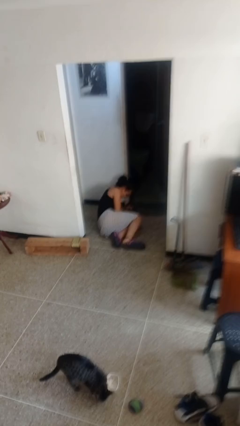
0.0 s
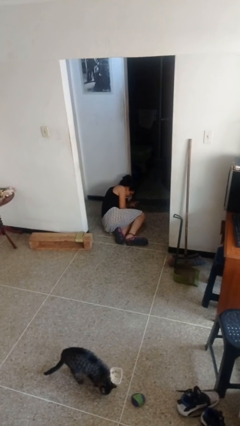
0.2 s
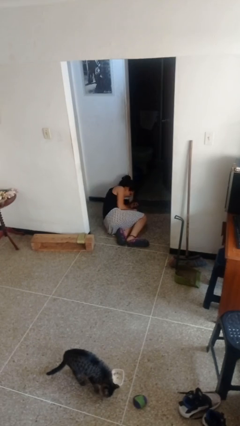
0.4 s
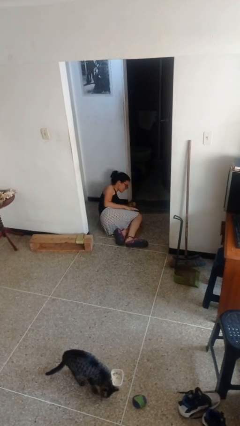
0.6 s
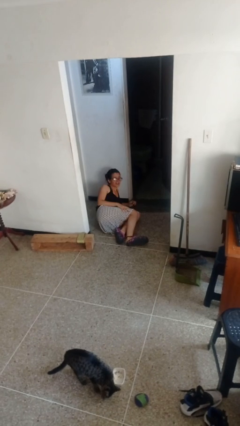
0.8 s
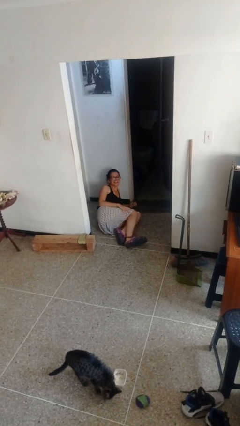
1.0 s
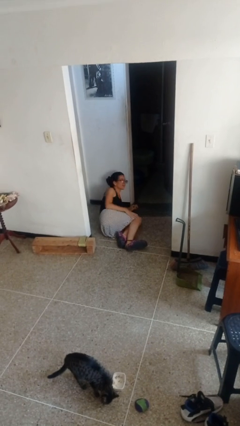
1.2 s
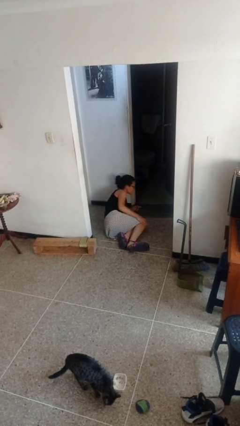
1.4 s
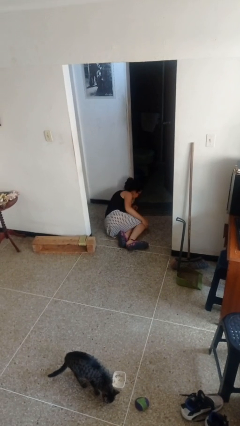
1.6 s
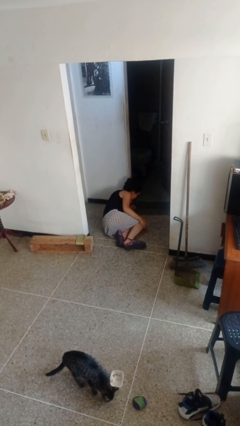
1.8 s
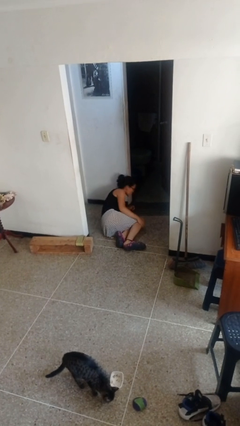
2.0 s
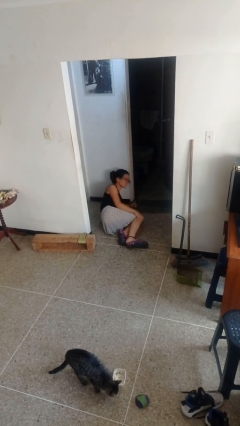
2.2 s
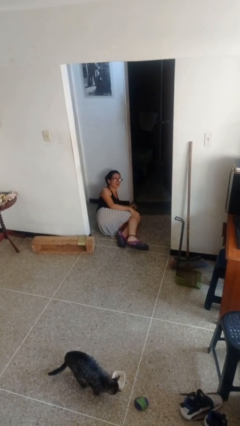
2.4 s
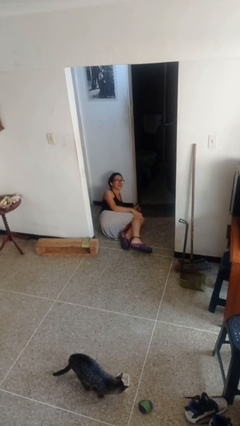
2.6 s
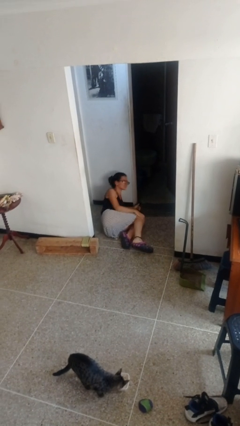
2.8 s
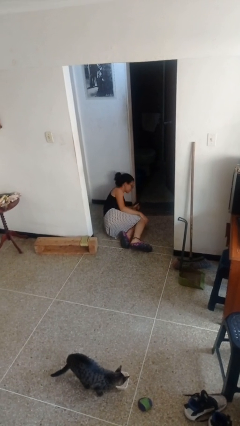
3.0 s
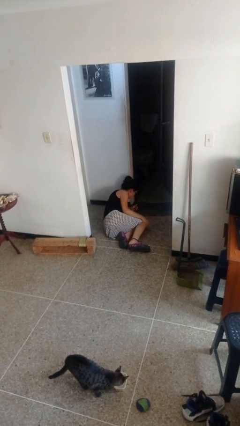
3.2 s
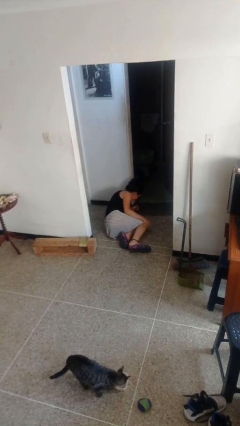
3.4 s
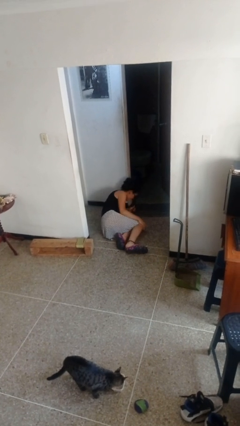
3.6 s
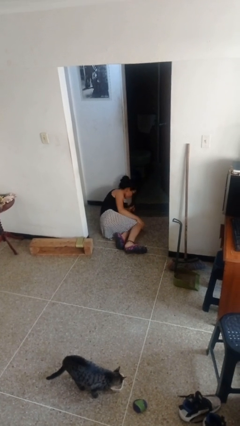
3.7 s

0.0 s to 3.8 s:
person lies down on floor

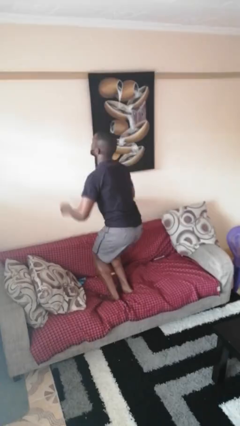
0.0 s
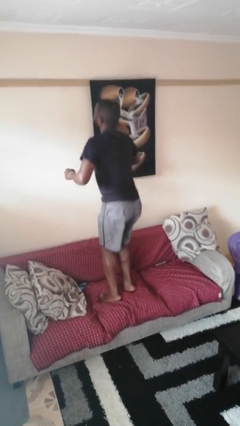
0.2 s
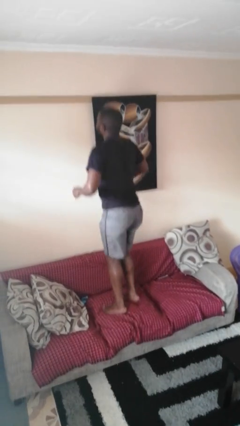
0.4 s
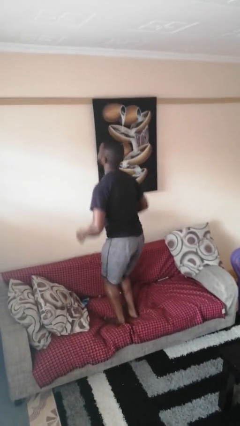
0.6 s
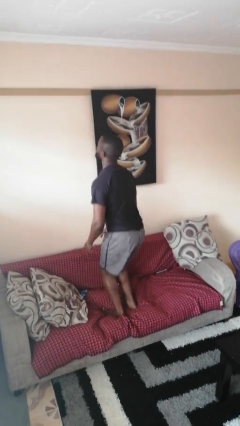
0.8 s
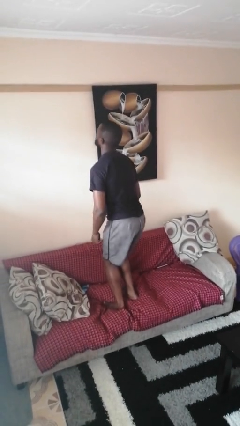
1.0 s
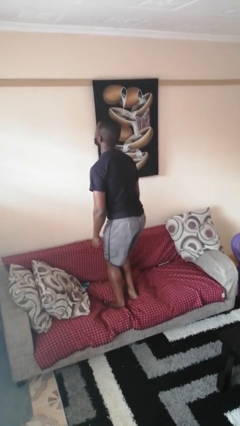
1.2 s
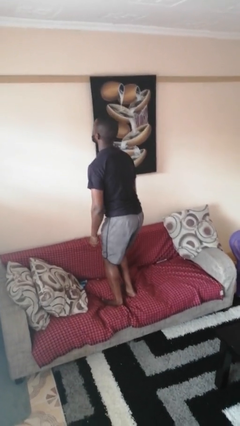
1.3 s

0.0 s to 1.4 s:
person jumps on couch

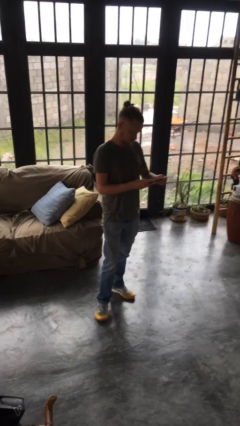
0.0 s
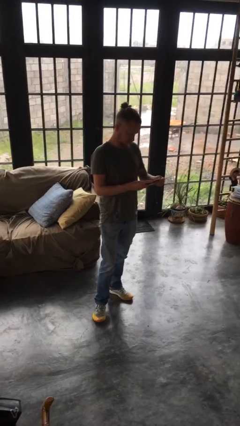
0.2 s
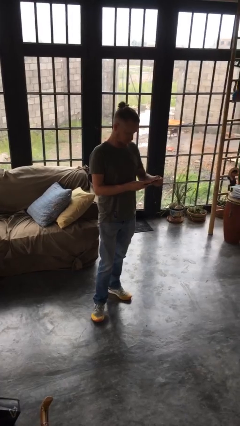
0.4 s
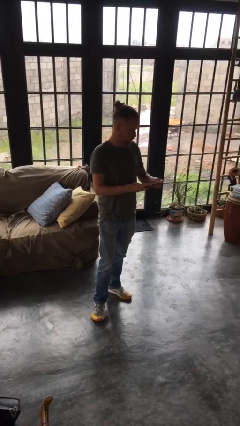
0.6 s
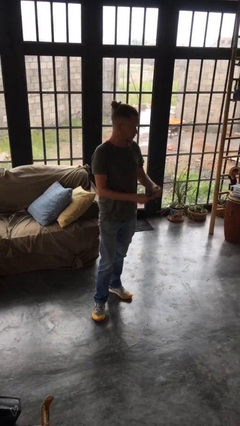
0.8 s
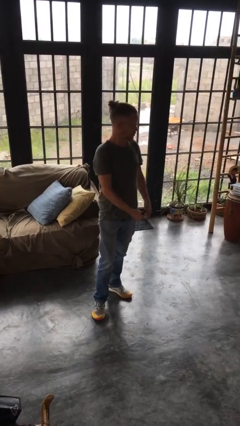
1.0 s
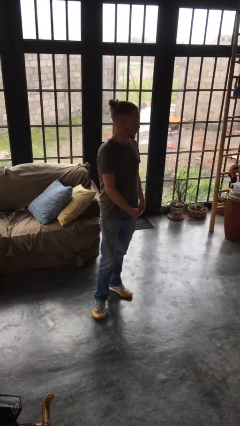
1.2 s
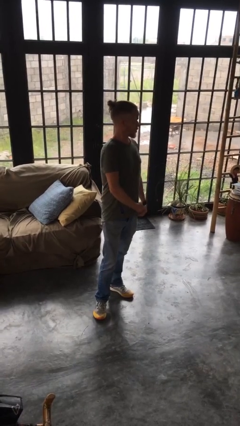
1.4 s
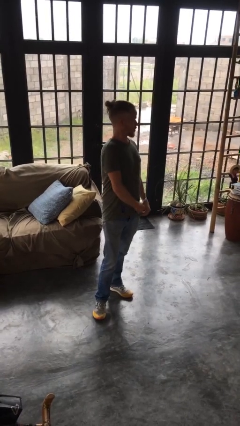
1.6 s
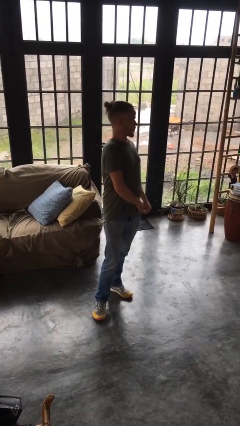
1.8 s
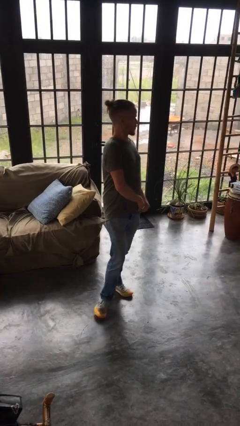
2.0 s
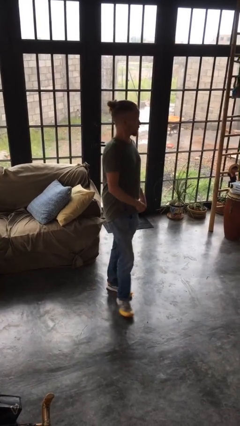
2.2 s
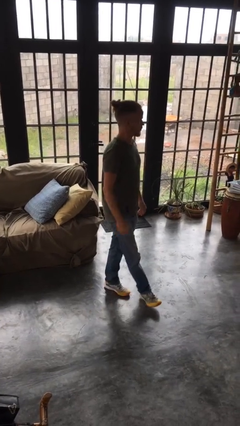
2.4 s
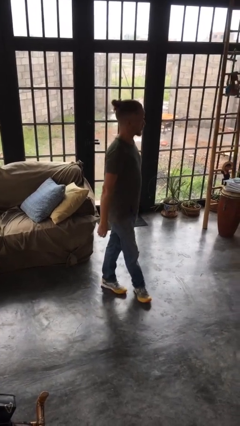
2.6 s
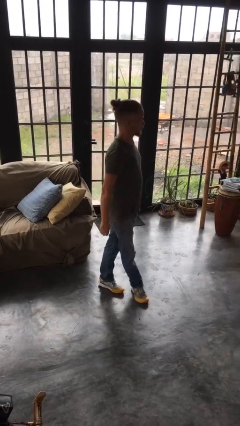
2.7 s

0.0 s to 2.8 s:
person puts phone into pocket

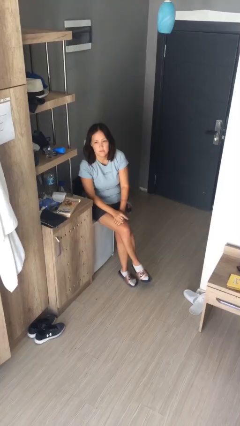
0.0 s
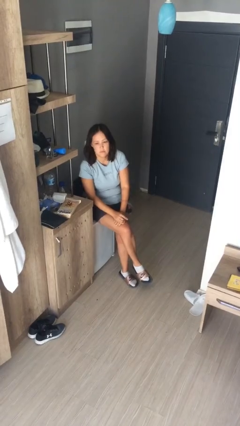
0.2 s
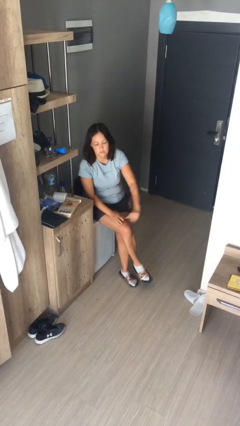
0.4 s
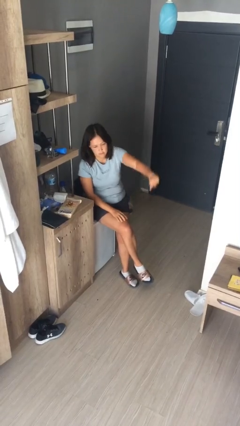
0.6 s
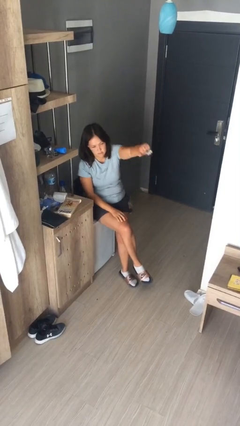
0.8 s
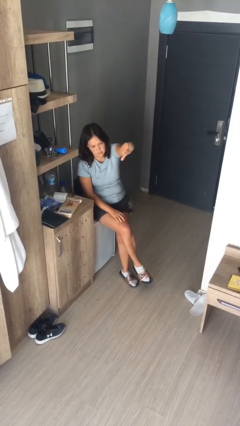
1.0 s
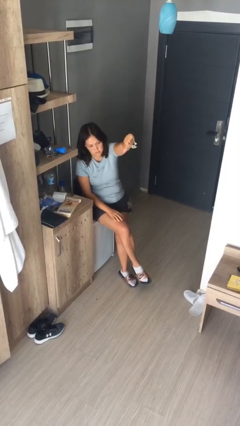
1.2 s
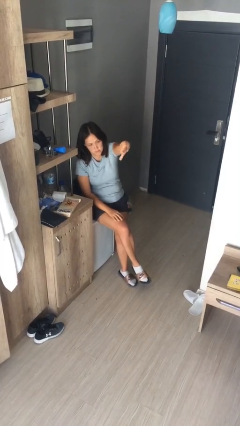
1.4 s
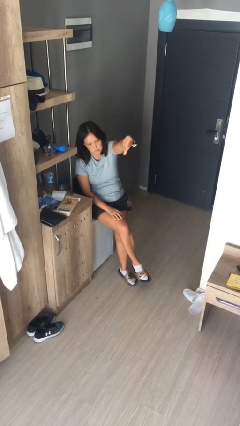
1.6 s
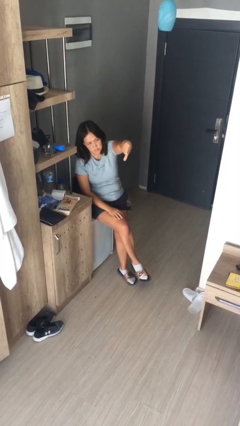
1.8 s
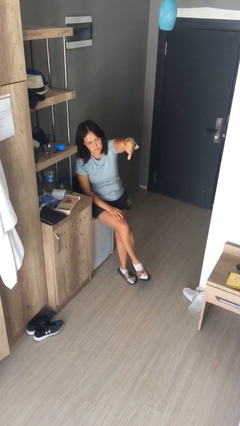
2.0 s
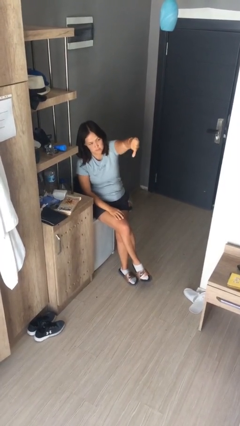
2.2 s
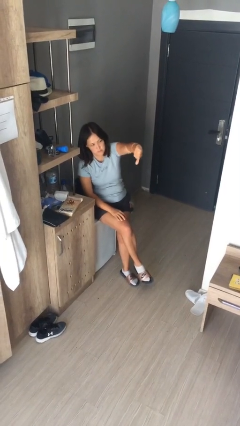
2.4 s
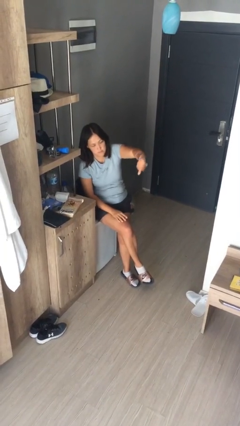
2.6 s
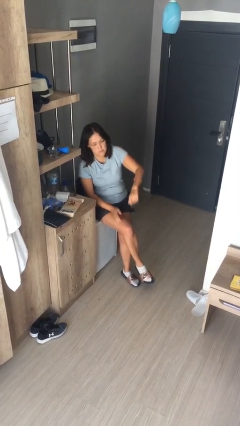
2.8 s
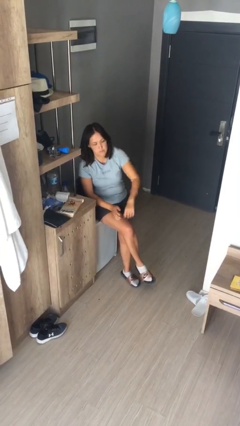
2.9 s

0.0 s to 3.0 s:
person gestures thumbs down

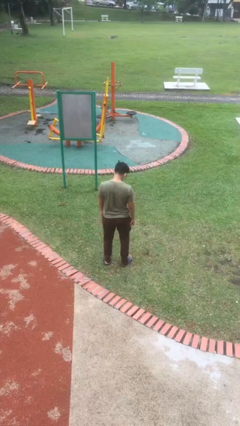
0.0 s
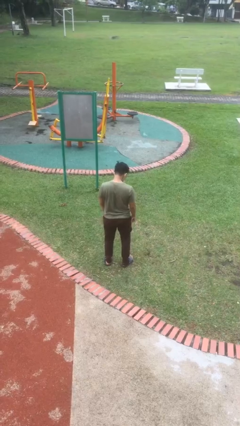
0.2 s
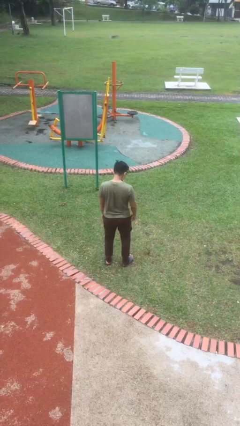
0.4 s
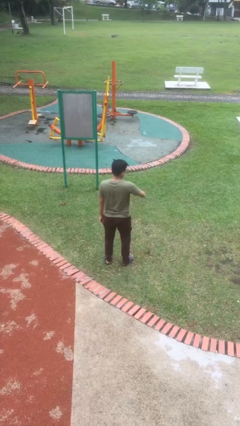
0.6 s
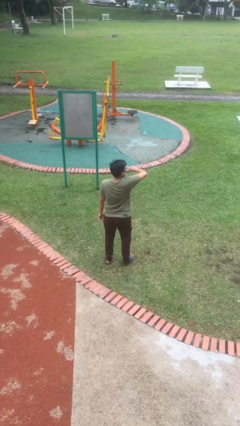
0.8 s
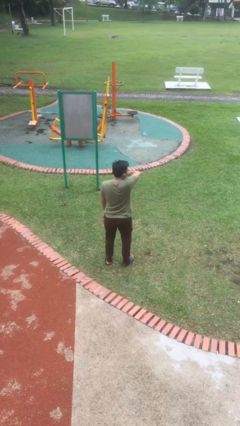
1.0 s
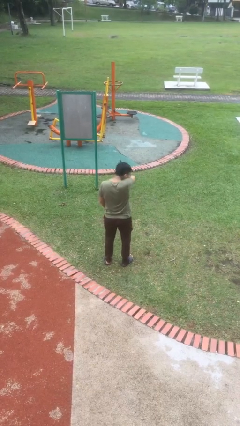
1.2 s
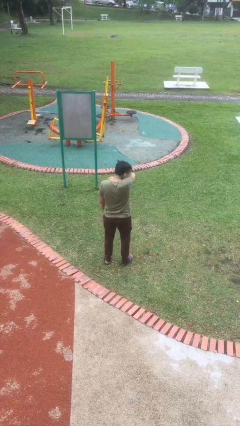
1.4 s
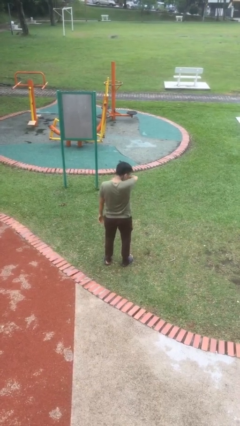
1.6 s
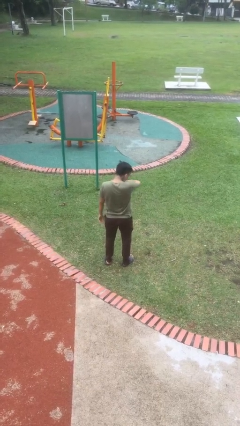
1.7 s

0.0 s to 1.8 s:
person sneezes into arm

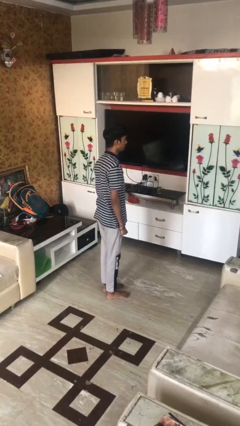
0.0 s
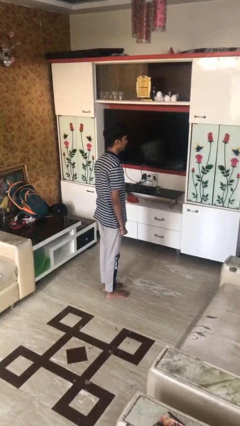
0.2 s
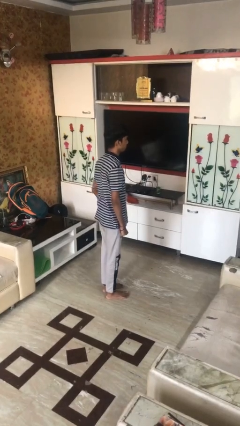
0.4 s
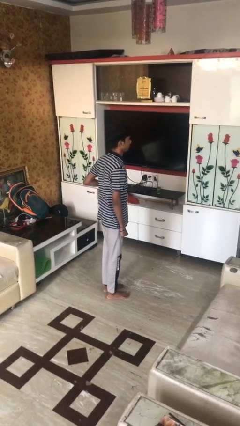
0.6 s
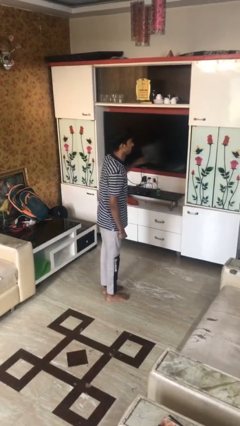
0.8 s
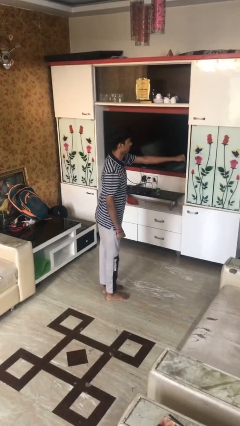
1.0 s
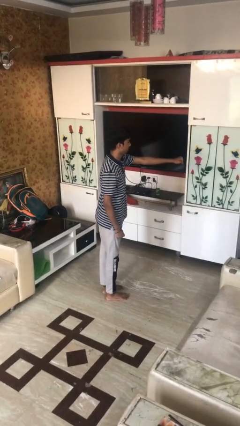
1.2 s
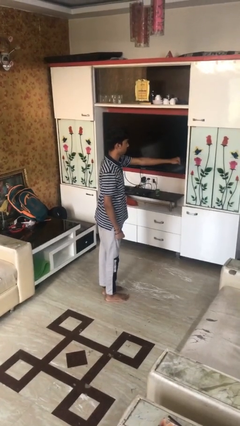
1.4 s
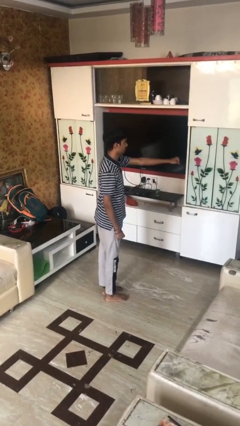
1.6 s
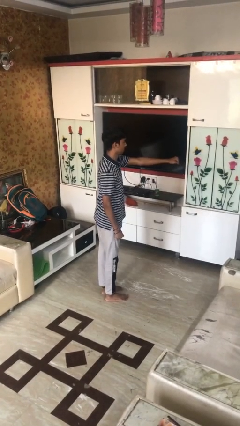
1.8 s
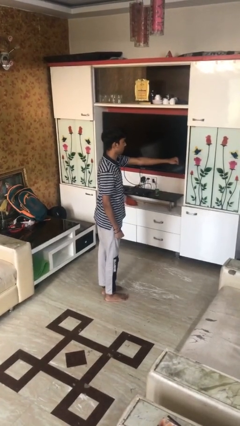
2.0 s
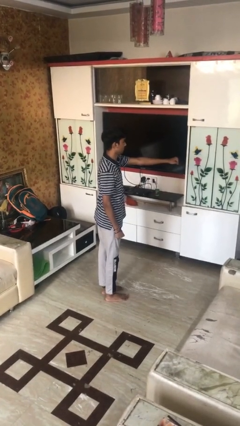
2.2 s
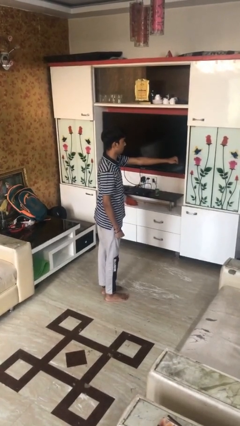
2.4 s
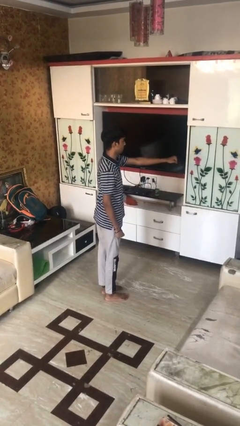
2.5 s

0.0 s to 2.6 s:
person punches

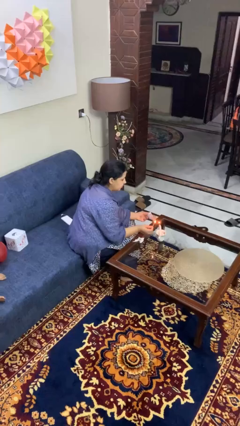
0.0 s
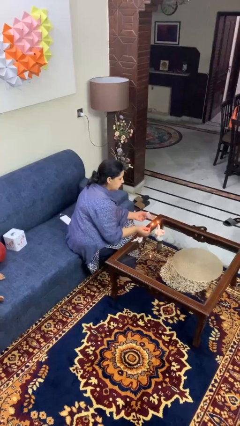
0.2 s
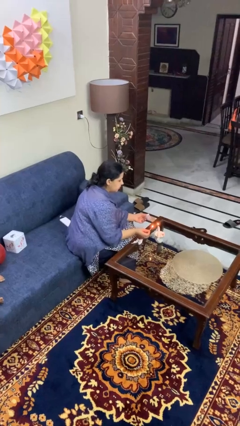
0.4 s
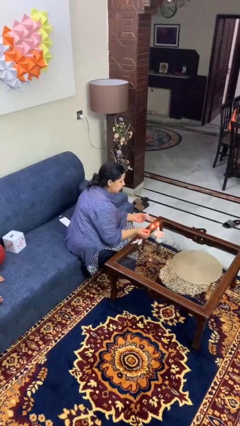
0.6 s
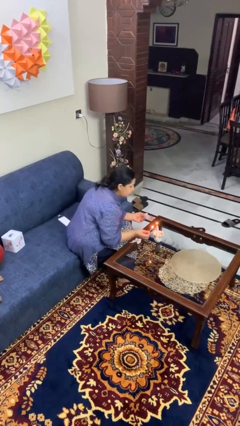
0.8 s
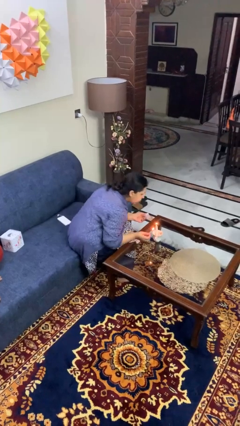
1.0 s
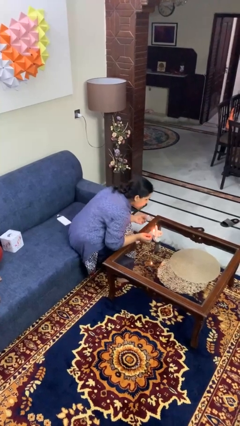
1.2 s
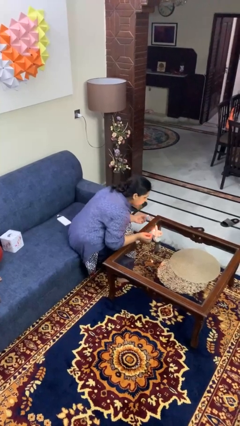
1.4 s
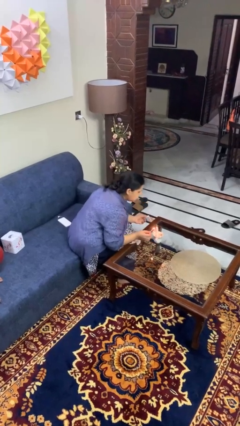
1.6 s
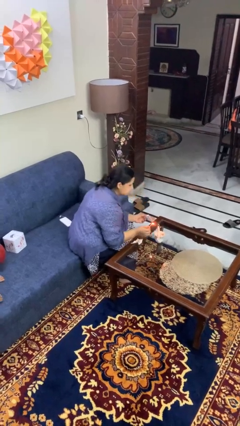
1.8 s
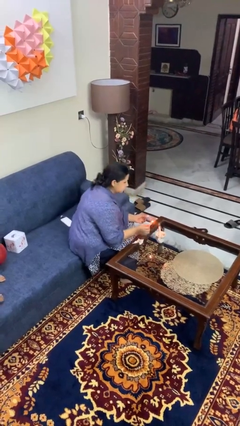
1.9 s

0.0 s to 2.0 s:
person extinguishes candle
